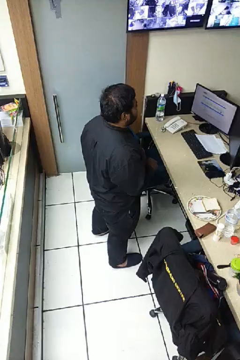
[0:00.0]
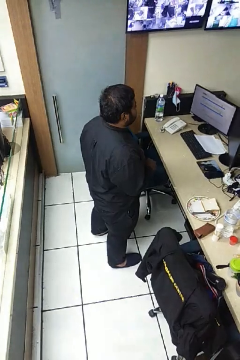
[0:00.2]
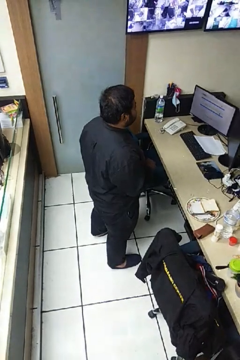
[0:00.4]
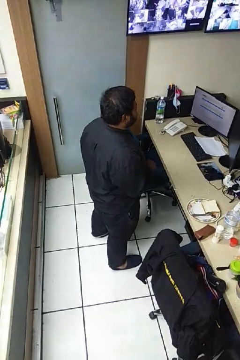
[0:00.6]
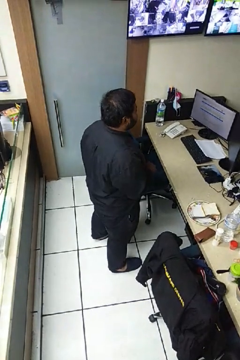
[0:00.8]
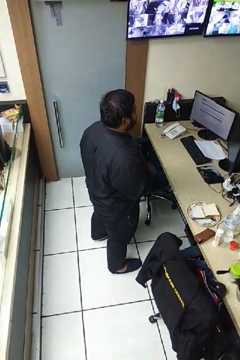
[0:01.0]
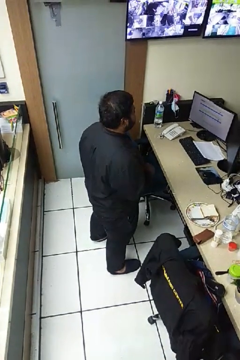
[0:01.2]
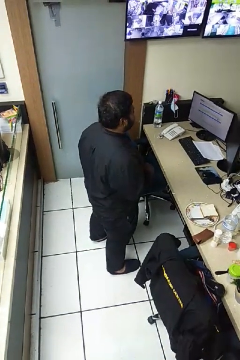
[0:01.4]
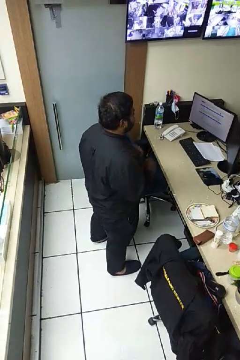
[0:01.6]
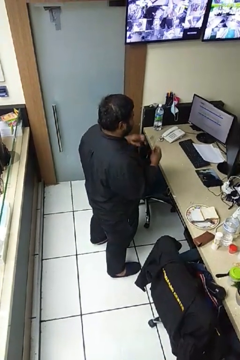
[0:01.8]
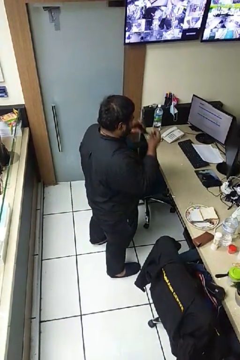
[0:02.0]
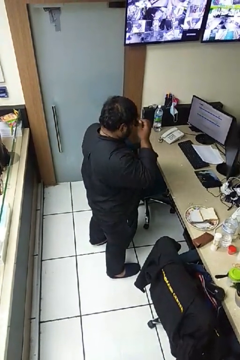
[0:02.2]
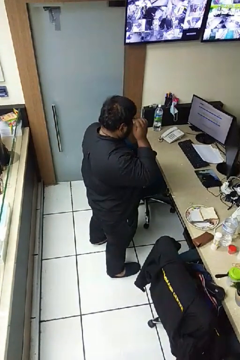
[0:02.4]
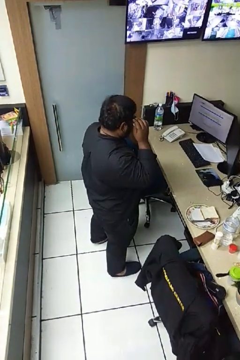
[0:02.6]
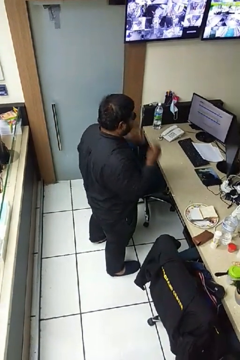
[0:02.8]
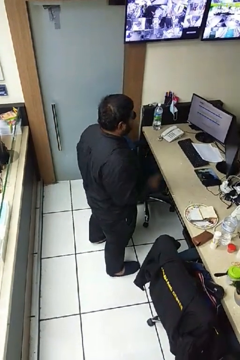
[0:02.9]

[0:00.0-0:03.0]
person puts on sunglasses

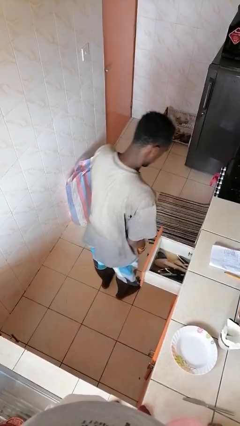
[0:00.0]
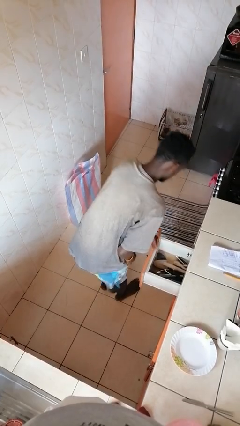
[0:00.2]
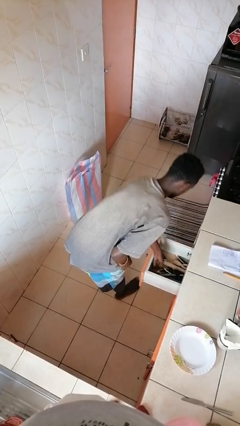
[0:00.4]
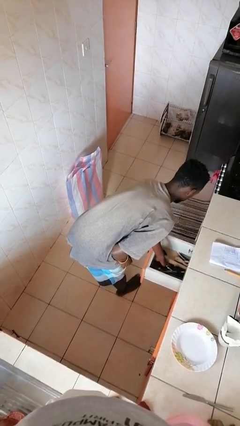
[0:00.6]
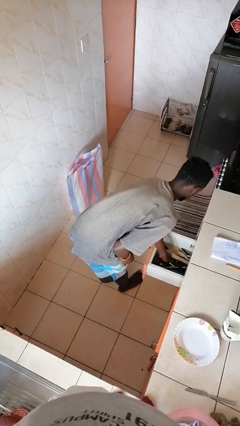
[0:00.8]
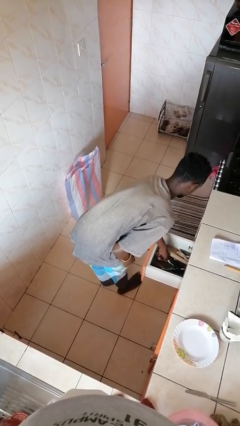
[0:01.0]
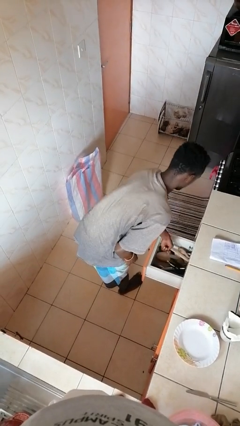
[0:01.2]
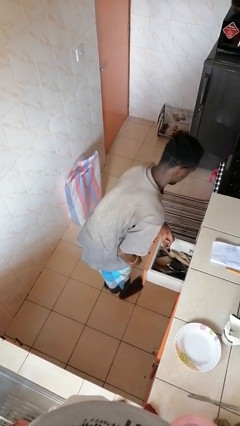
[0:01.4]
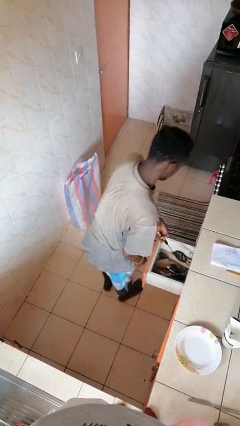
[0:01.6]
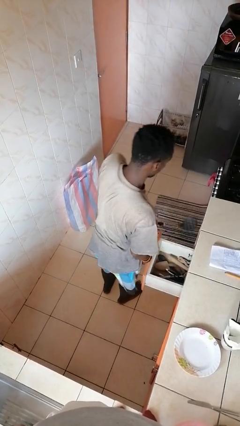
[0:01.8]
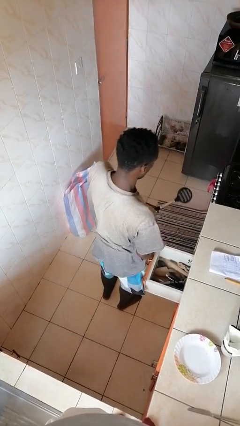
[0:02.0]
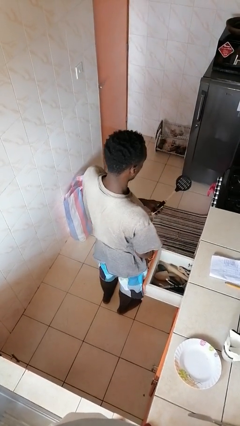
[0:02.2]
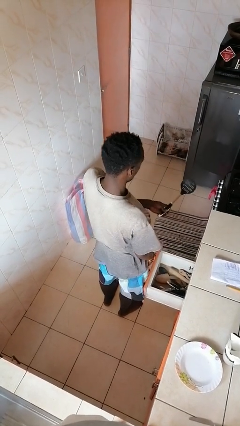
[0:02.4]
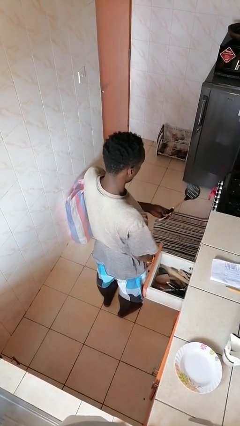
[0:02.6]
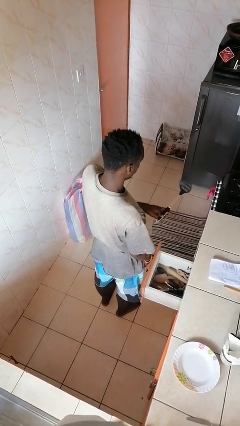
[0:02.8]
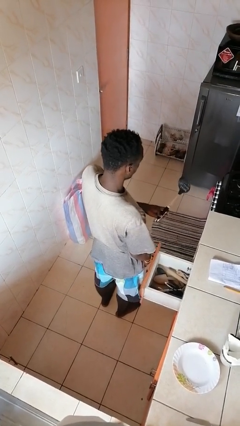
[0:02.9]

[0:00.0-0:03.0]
person takes object from kitchen drawer

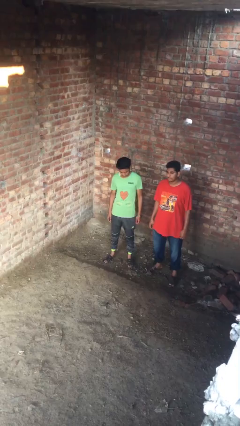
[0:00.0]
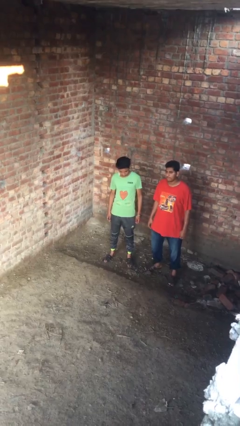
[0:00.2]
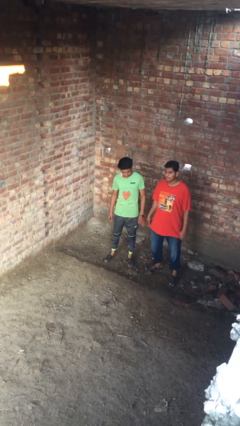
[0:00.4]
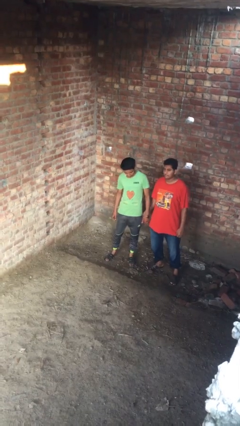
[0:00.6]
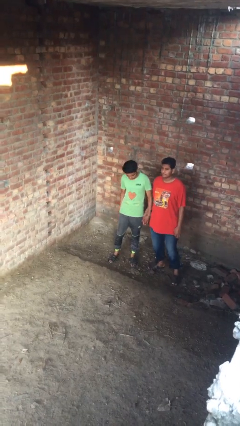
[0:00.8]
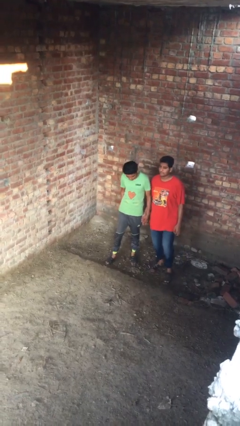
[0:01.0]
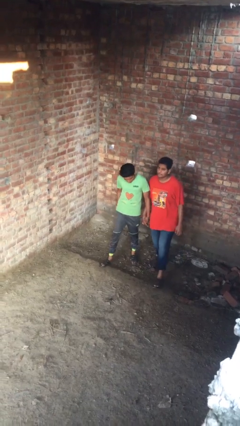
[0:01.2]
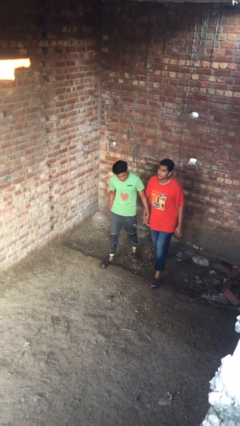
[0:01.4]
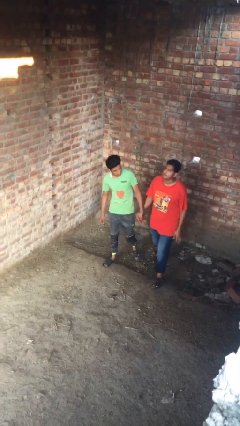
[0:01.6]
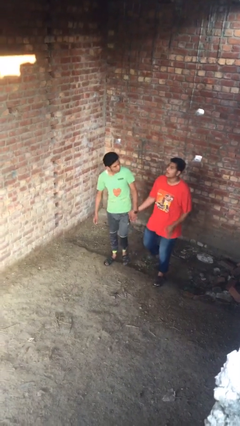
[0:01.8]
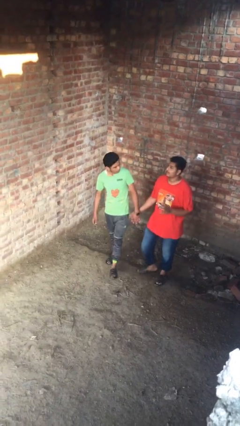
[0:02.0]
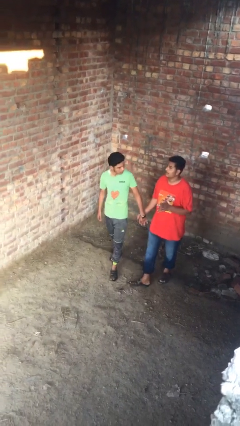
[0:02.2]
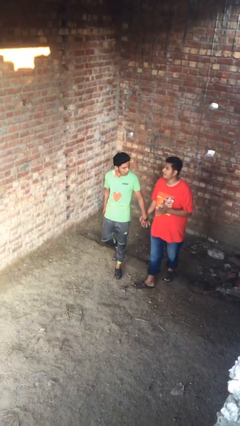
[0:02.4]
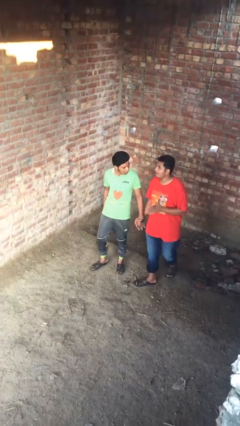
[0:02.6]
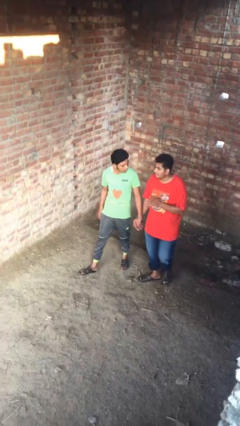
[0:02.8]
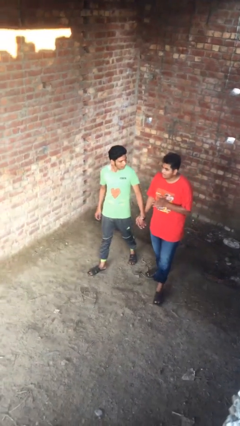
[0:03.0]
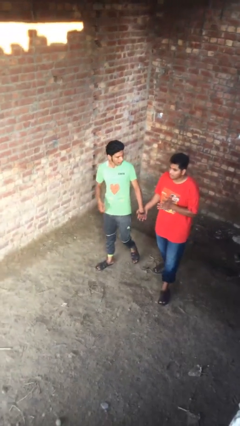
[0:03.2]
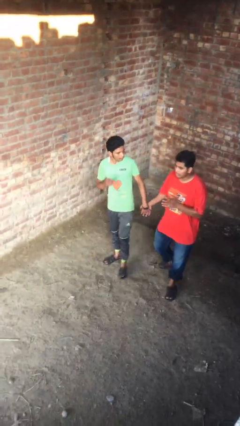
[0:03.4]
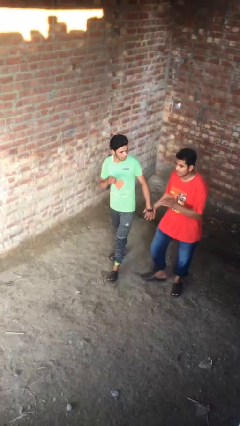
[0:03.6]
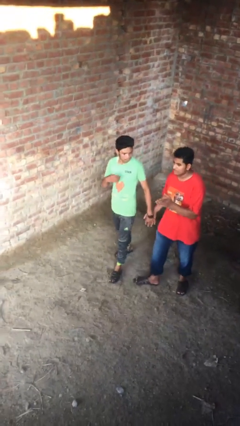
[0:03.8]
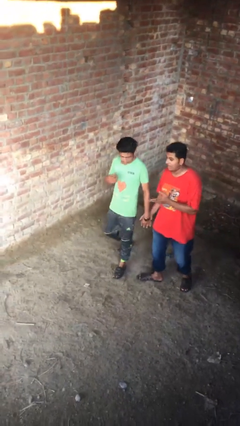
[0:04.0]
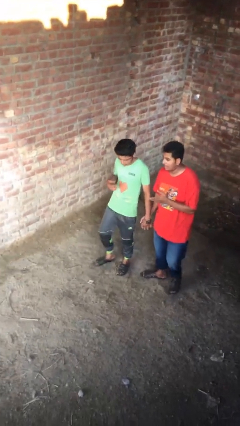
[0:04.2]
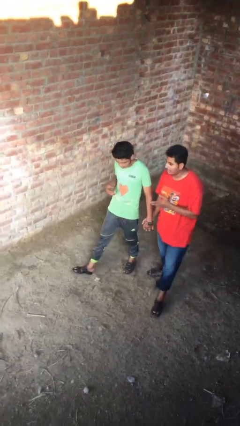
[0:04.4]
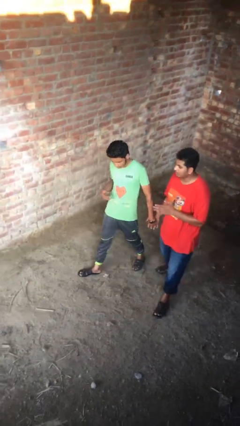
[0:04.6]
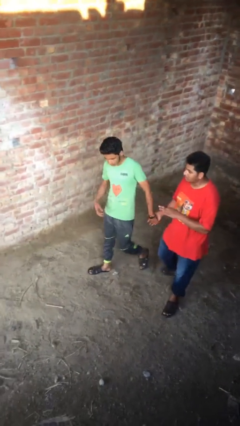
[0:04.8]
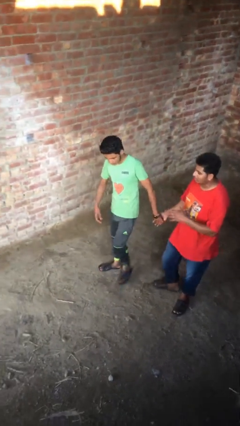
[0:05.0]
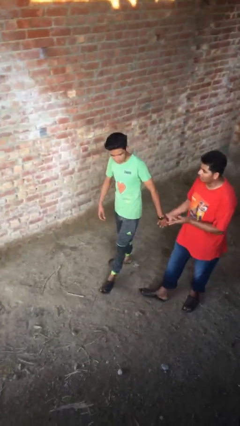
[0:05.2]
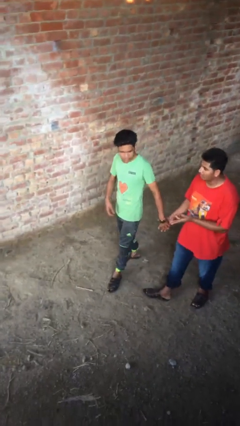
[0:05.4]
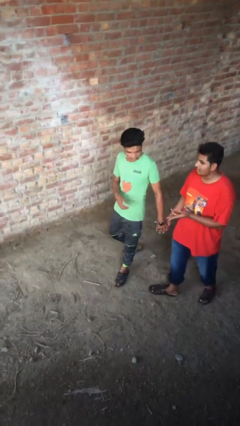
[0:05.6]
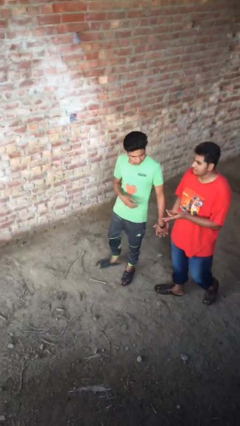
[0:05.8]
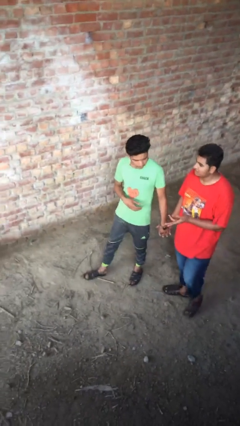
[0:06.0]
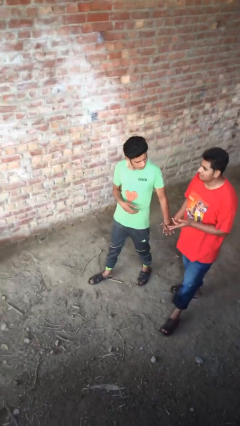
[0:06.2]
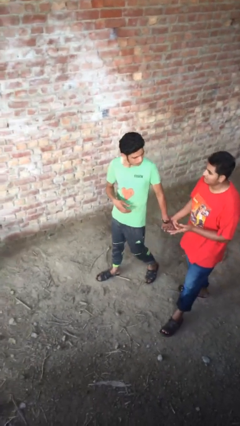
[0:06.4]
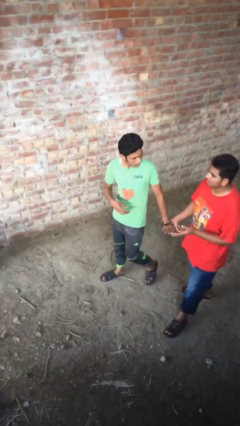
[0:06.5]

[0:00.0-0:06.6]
person holds hand

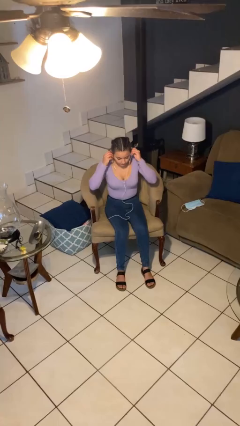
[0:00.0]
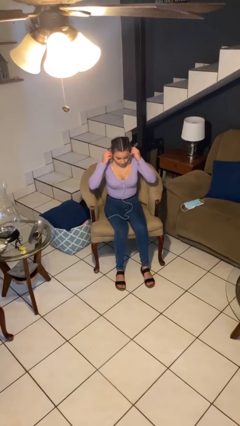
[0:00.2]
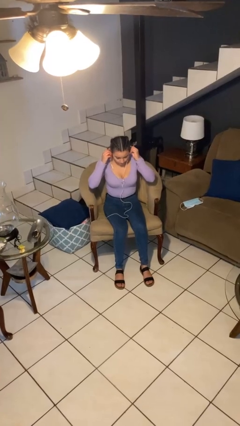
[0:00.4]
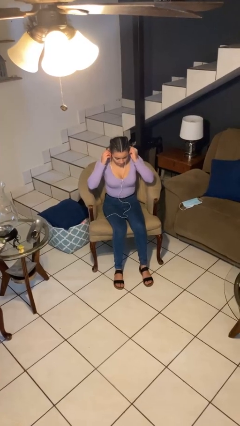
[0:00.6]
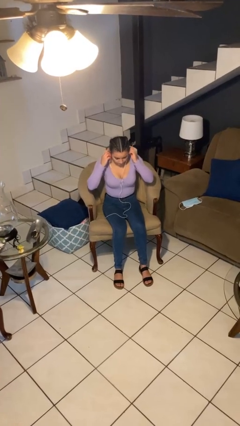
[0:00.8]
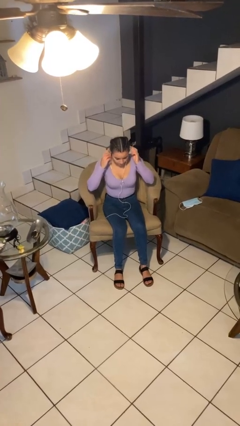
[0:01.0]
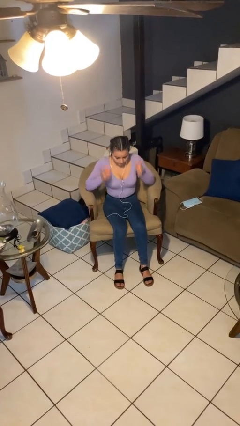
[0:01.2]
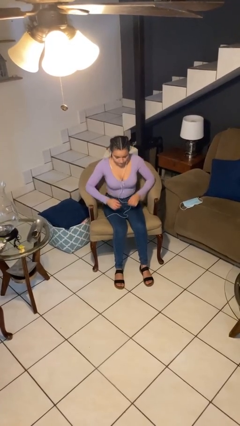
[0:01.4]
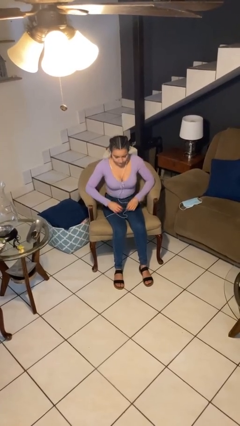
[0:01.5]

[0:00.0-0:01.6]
person puts on headphones

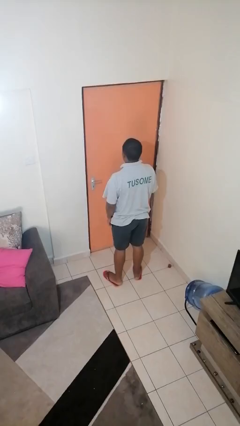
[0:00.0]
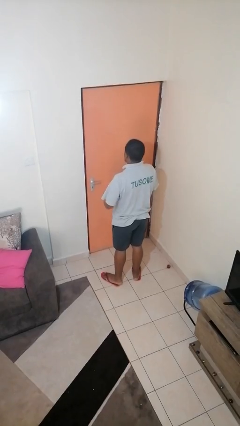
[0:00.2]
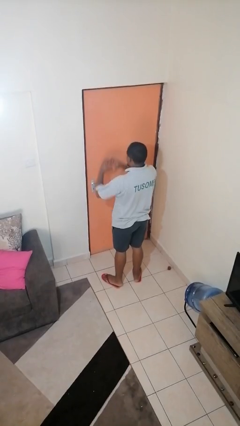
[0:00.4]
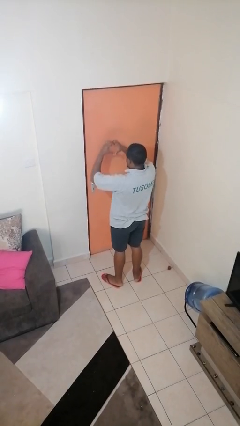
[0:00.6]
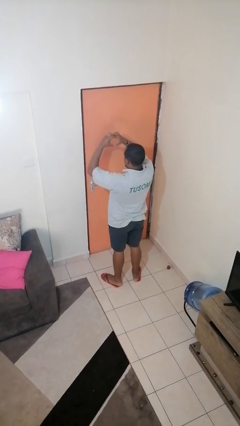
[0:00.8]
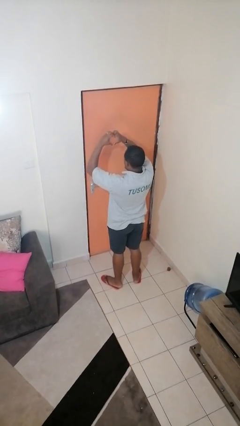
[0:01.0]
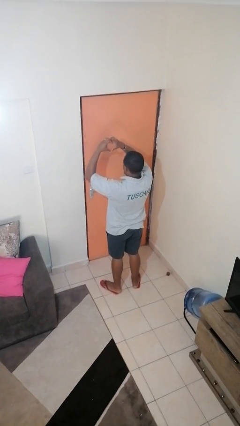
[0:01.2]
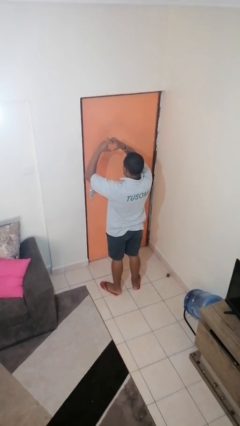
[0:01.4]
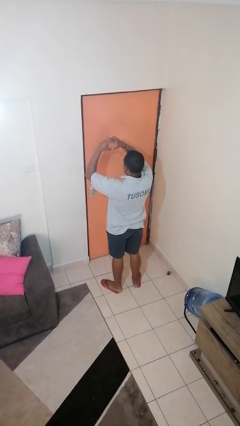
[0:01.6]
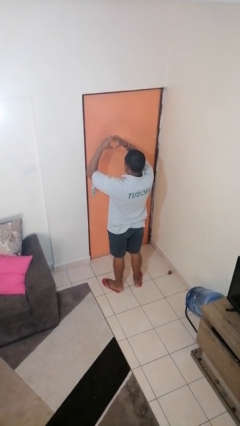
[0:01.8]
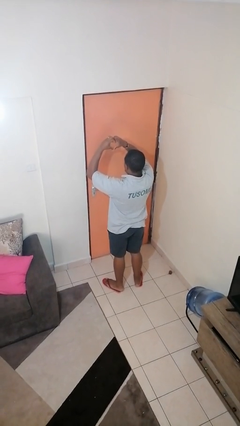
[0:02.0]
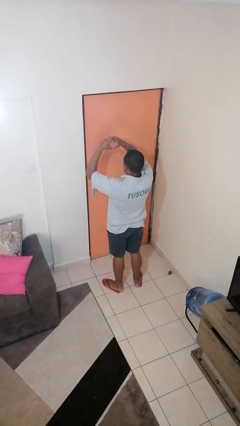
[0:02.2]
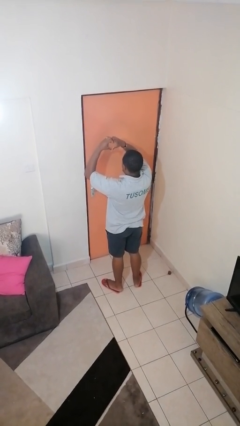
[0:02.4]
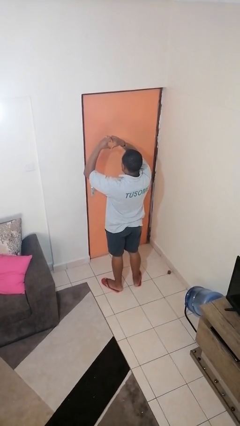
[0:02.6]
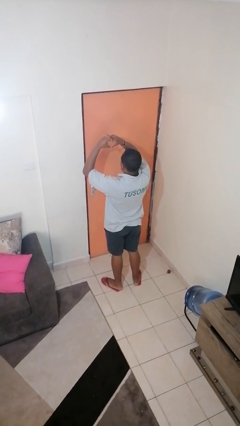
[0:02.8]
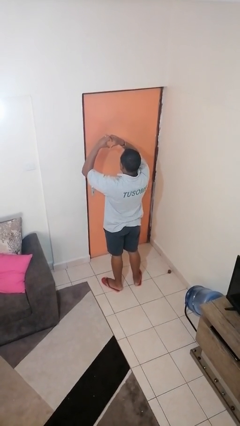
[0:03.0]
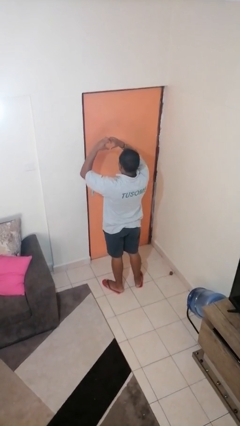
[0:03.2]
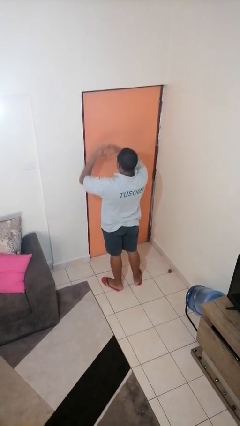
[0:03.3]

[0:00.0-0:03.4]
person gestures heart

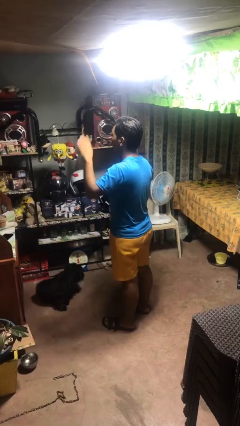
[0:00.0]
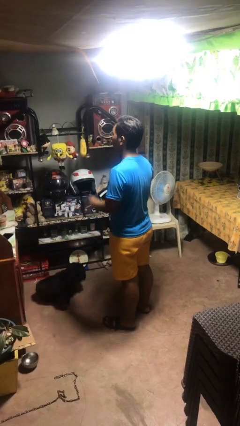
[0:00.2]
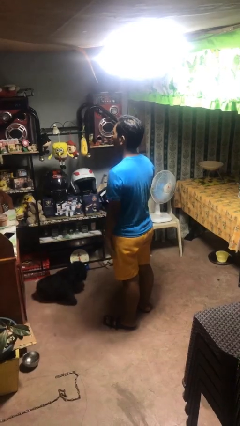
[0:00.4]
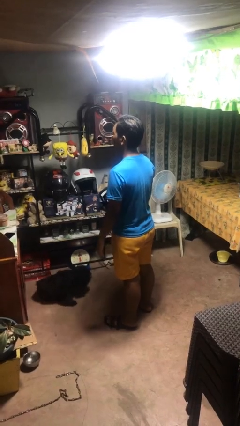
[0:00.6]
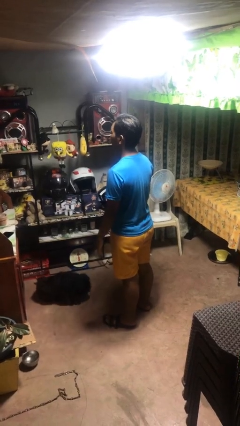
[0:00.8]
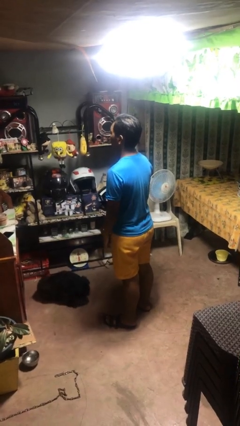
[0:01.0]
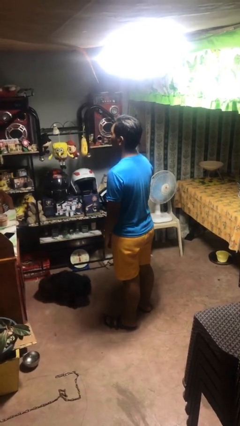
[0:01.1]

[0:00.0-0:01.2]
person gestures lower hand
